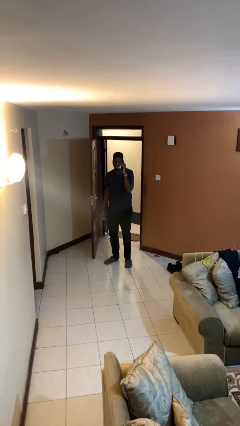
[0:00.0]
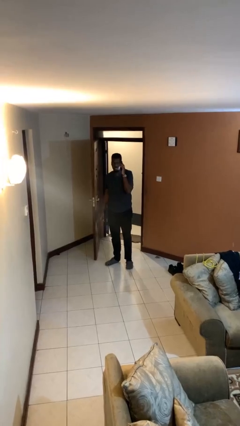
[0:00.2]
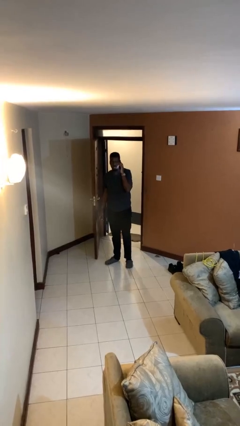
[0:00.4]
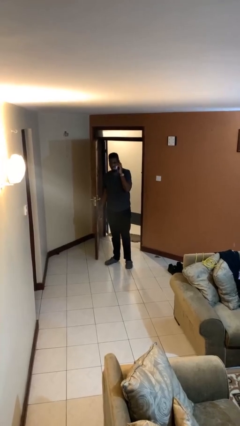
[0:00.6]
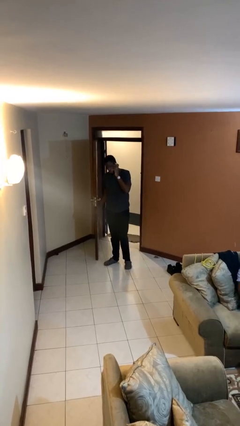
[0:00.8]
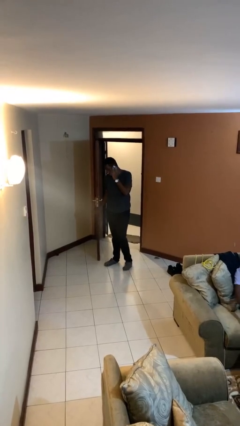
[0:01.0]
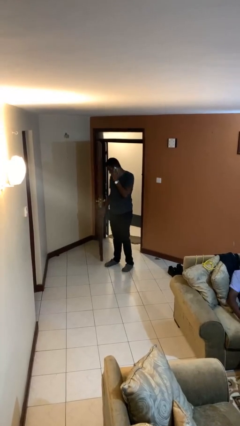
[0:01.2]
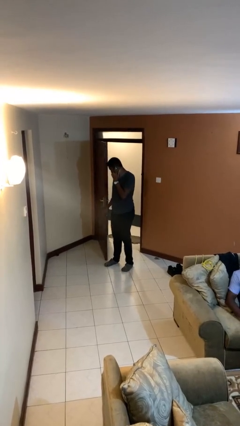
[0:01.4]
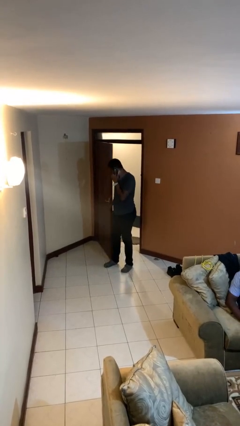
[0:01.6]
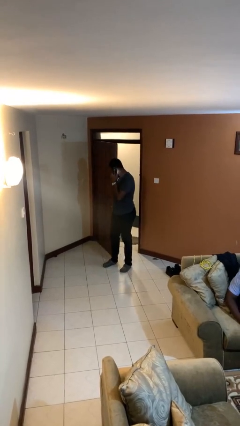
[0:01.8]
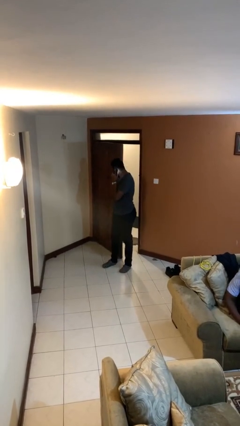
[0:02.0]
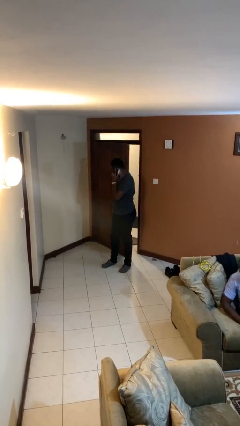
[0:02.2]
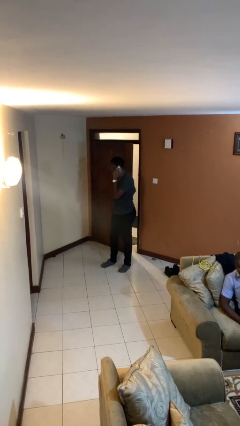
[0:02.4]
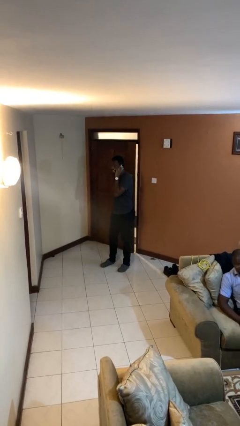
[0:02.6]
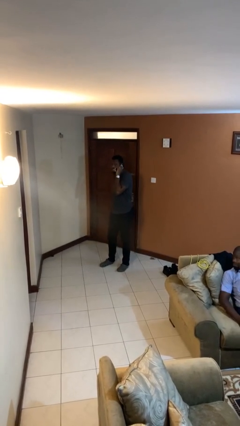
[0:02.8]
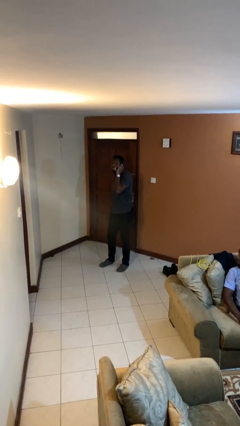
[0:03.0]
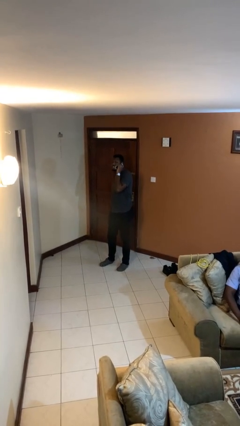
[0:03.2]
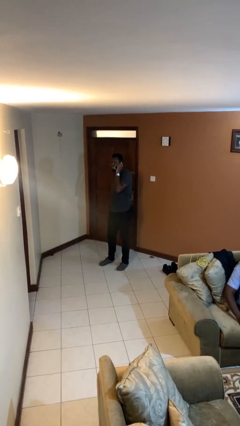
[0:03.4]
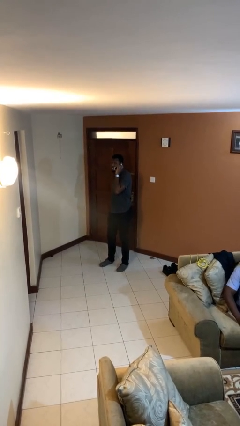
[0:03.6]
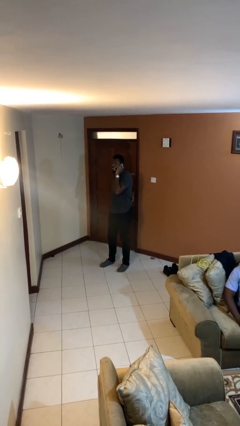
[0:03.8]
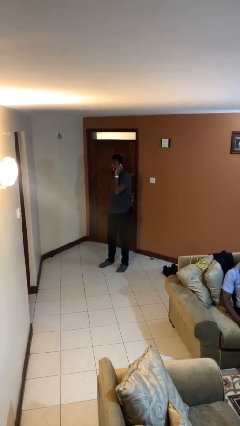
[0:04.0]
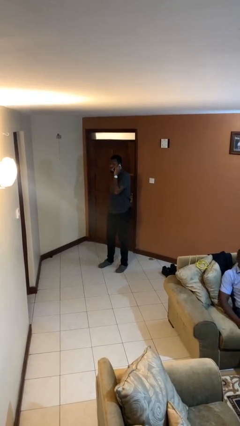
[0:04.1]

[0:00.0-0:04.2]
person closes facility door

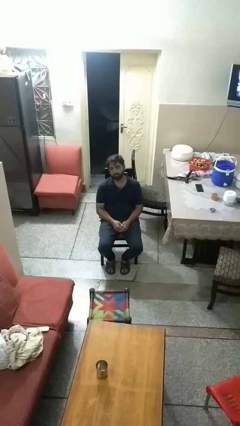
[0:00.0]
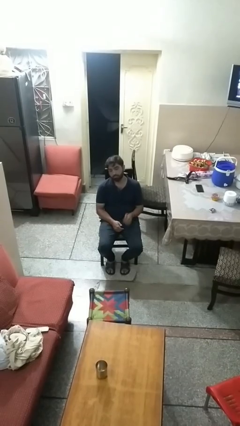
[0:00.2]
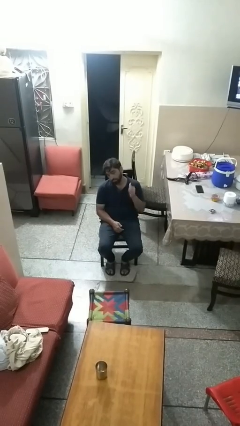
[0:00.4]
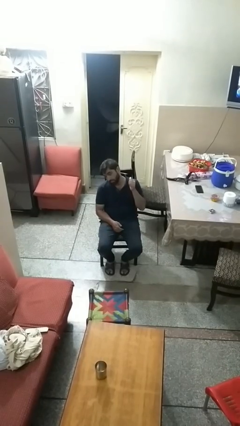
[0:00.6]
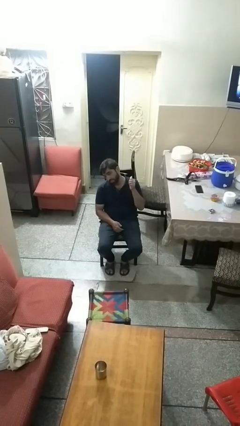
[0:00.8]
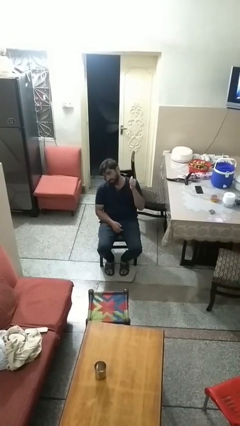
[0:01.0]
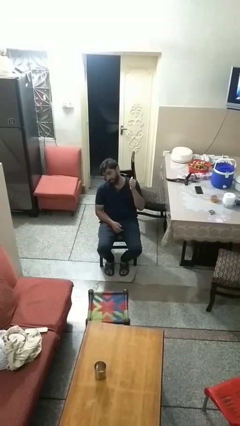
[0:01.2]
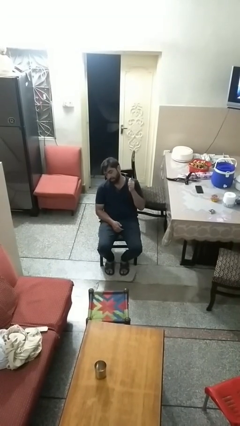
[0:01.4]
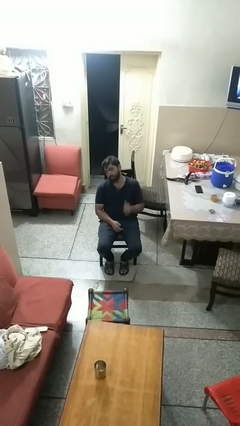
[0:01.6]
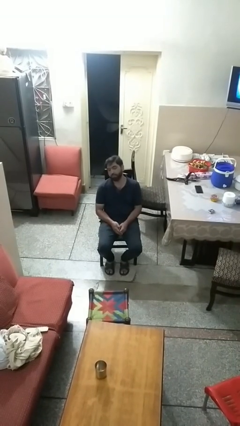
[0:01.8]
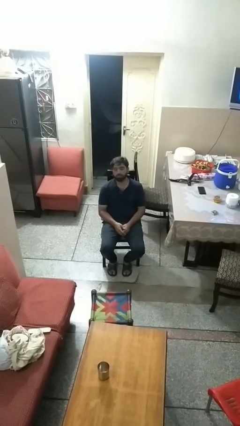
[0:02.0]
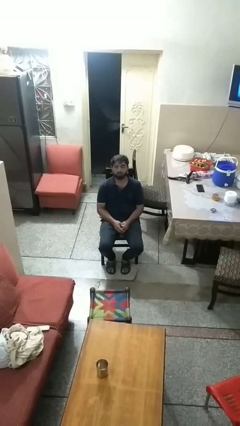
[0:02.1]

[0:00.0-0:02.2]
person gestures behind me

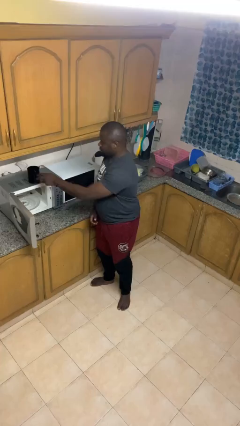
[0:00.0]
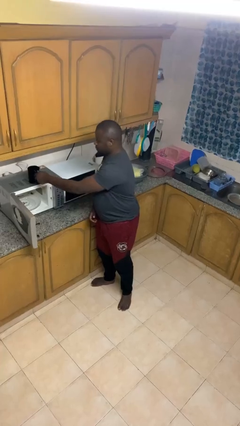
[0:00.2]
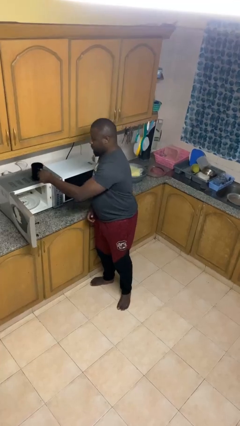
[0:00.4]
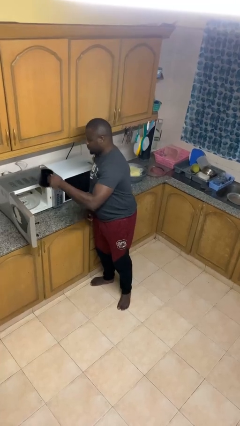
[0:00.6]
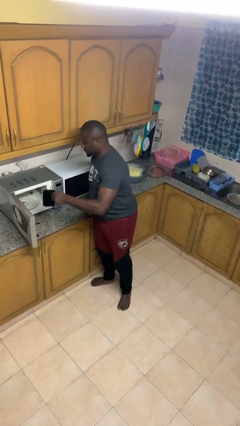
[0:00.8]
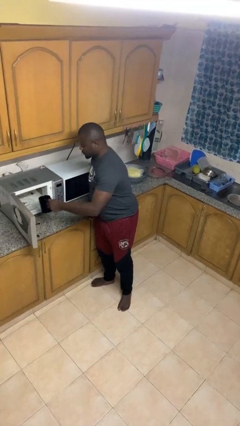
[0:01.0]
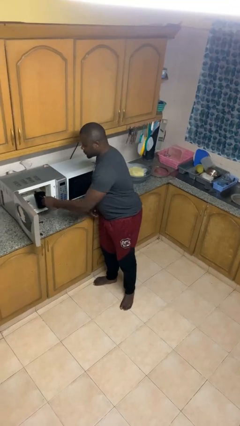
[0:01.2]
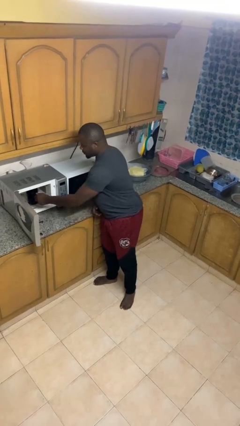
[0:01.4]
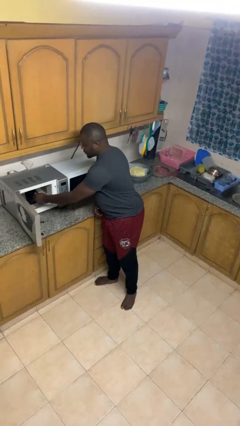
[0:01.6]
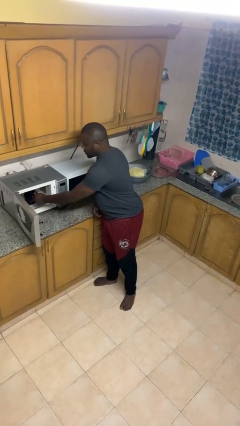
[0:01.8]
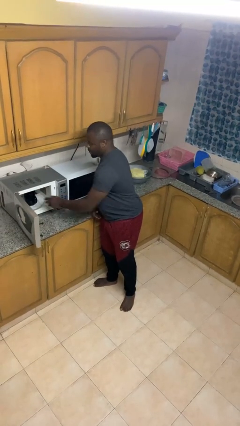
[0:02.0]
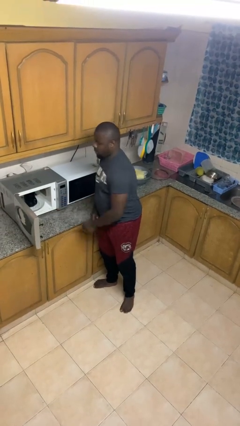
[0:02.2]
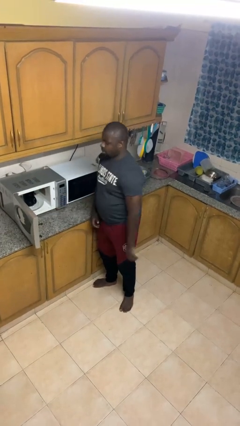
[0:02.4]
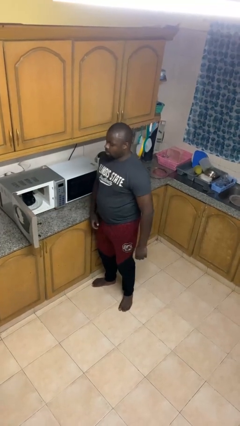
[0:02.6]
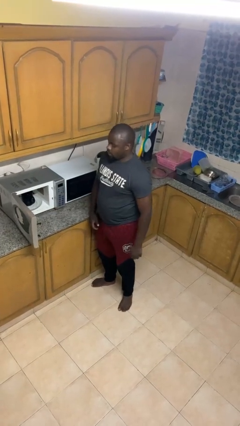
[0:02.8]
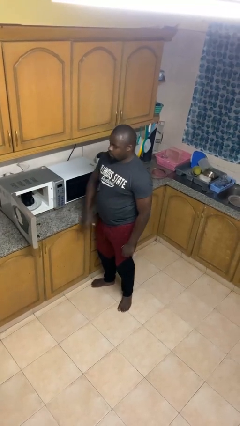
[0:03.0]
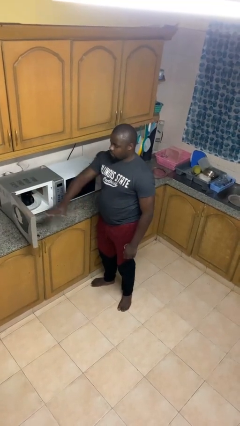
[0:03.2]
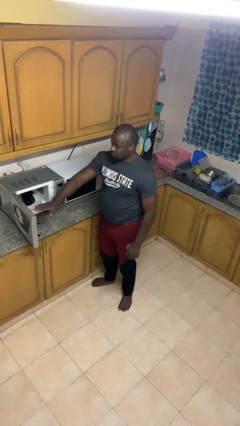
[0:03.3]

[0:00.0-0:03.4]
person puts object into microwave

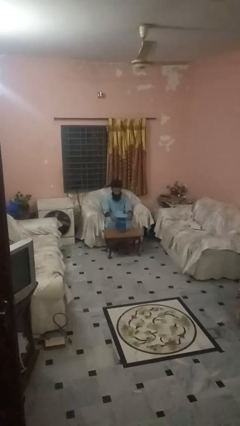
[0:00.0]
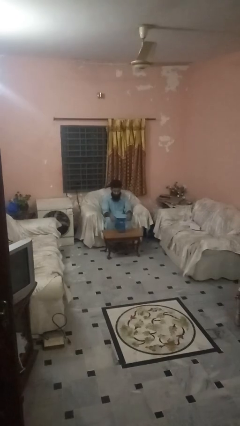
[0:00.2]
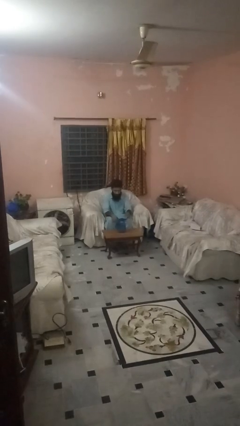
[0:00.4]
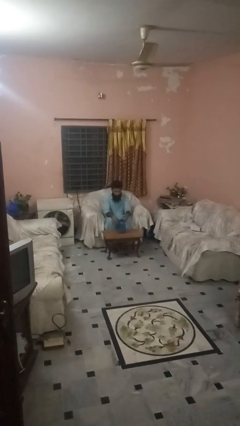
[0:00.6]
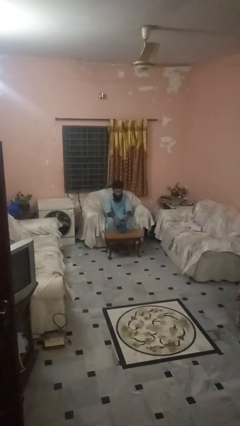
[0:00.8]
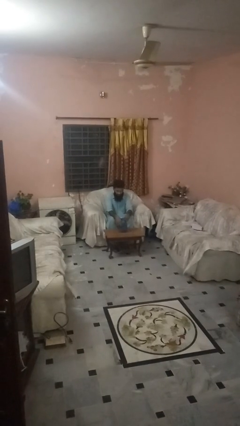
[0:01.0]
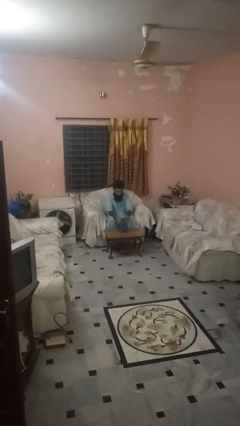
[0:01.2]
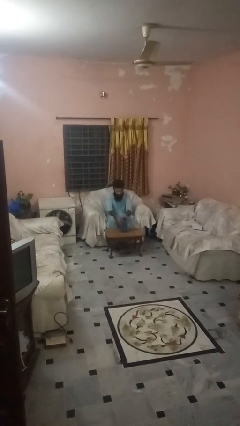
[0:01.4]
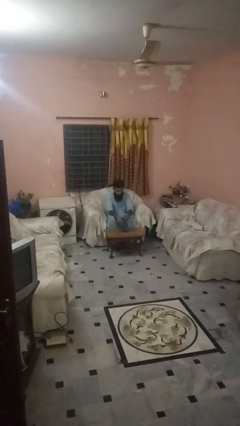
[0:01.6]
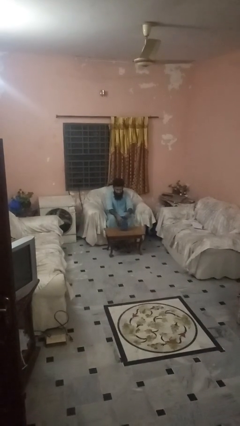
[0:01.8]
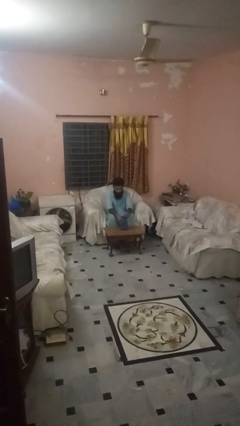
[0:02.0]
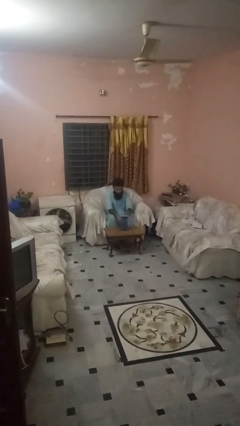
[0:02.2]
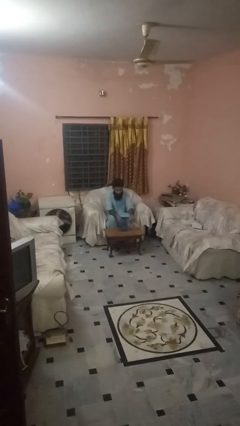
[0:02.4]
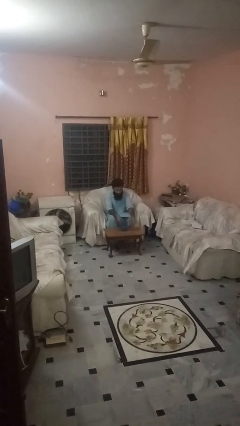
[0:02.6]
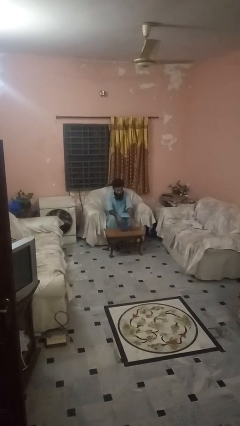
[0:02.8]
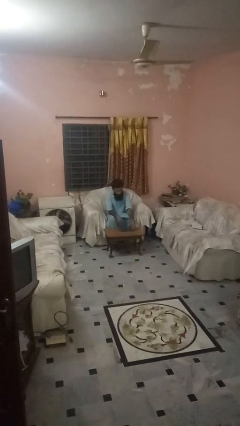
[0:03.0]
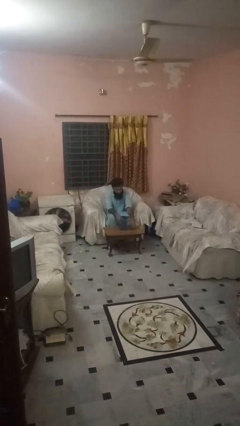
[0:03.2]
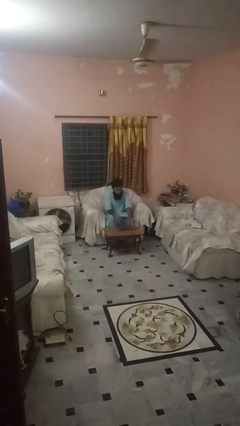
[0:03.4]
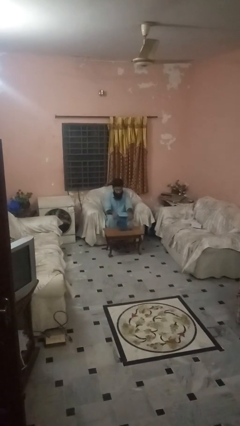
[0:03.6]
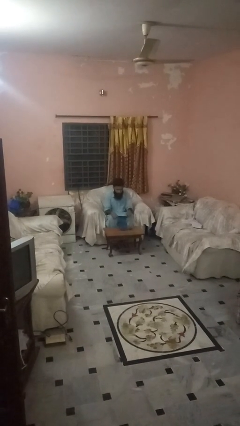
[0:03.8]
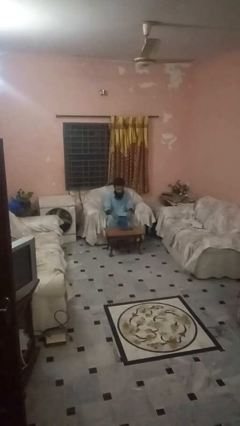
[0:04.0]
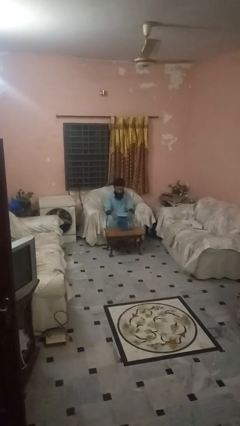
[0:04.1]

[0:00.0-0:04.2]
person unscrews lid from bottle

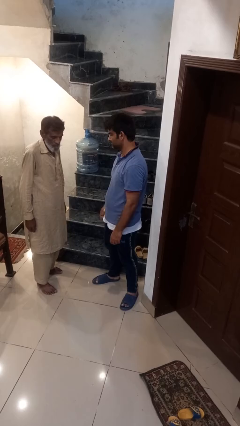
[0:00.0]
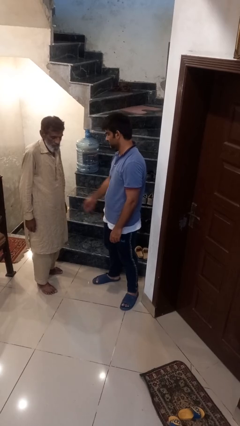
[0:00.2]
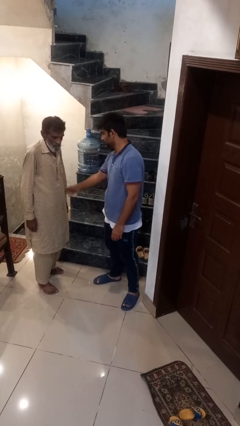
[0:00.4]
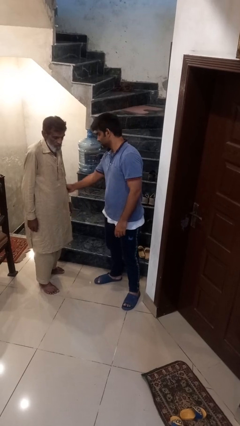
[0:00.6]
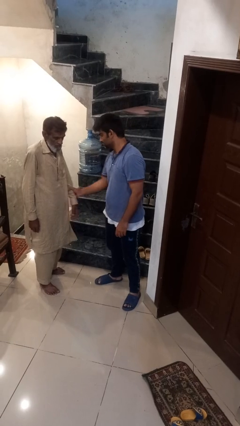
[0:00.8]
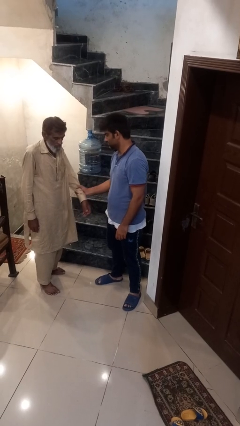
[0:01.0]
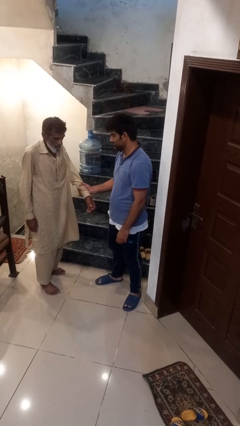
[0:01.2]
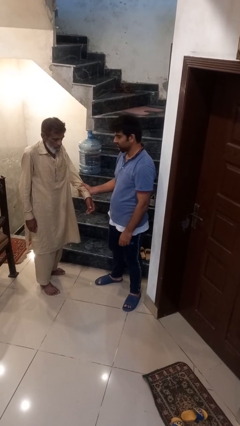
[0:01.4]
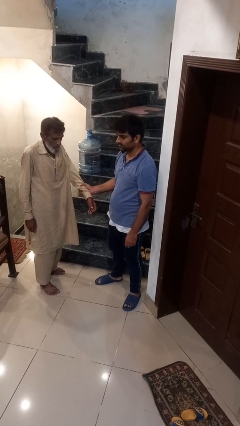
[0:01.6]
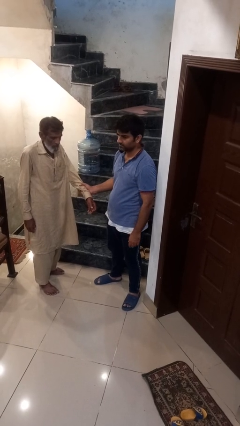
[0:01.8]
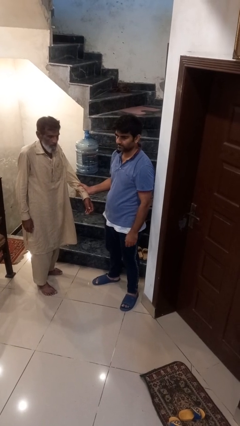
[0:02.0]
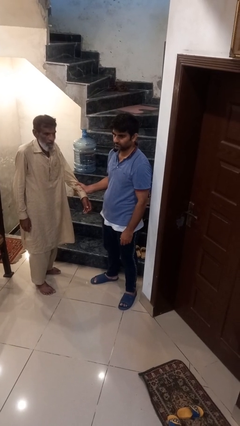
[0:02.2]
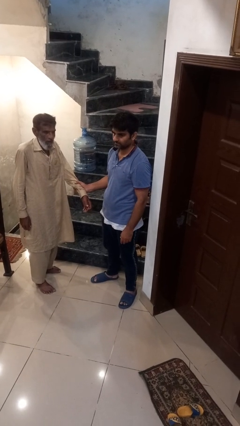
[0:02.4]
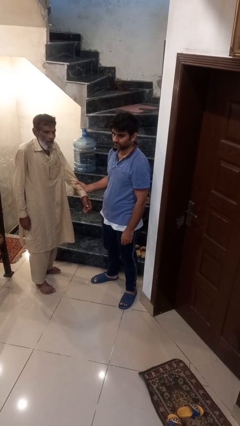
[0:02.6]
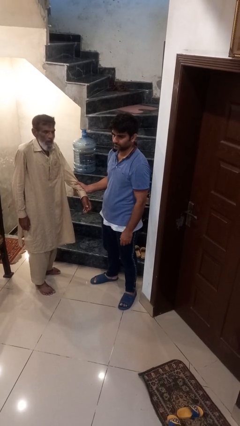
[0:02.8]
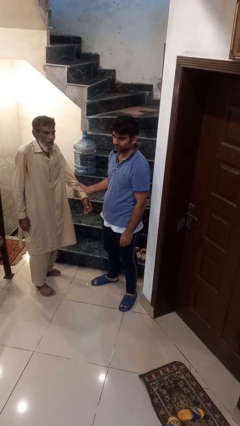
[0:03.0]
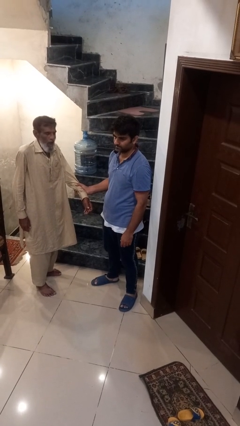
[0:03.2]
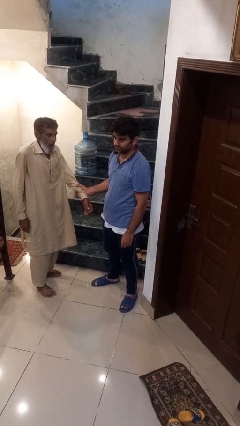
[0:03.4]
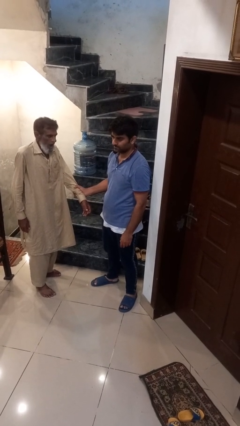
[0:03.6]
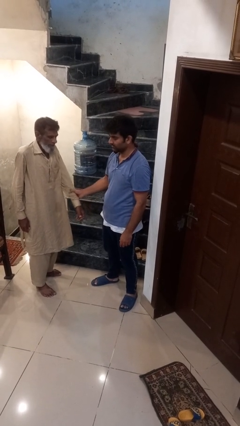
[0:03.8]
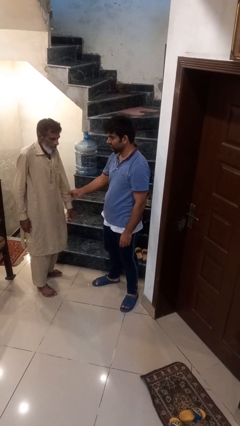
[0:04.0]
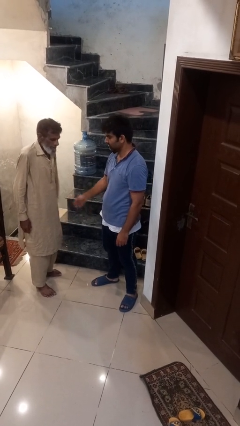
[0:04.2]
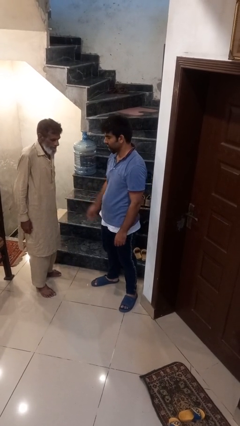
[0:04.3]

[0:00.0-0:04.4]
person grabs person by forearm
